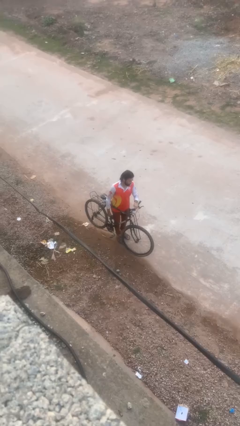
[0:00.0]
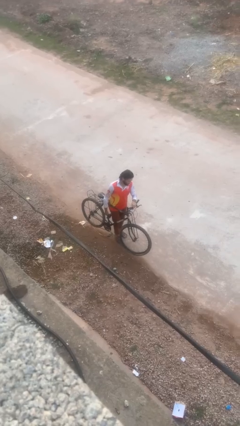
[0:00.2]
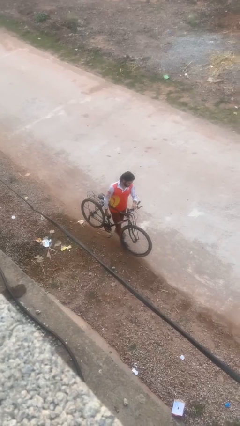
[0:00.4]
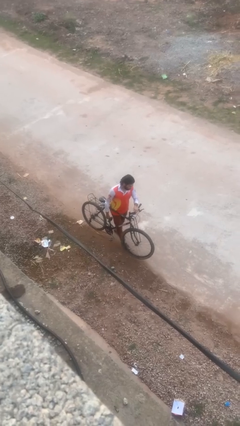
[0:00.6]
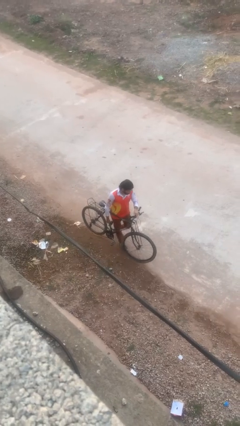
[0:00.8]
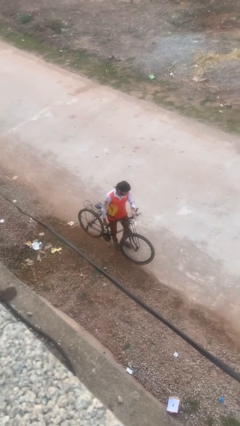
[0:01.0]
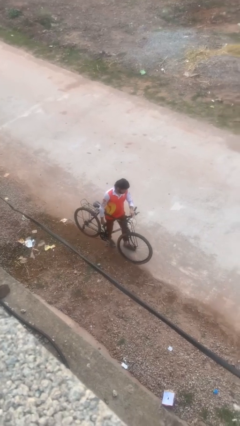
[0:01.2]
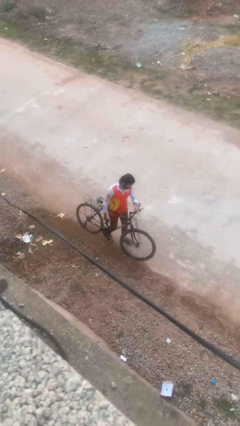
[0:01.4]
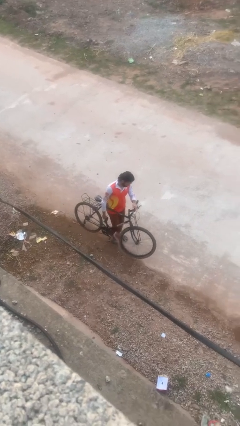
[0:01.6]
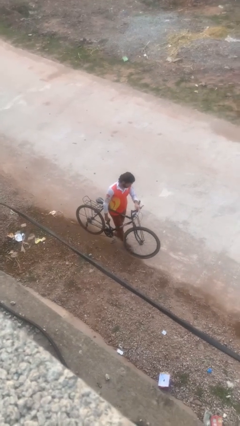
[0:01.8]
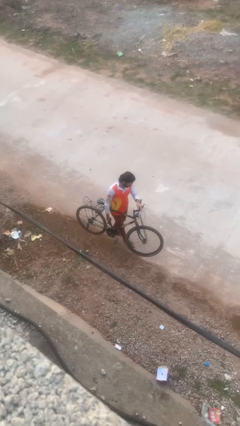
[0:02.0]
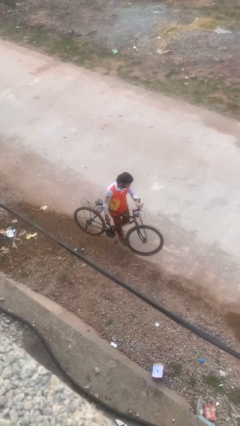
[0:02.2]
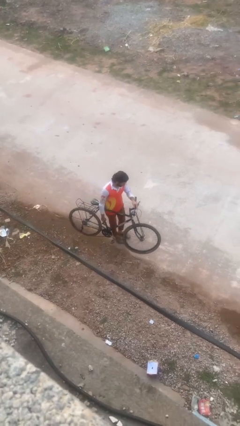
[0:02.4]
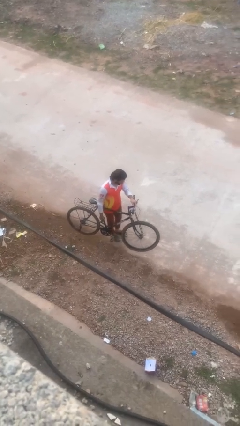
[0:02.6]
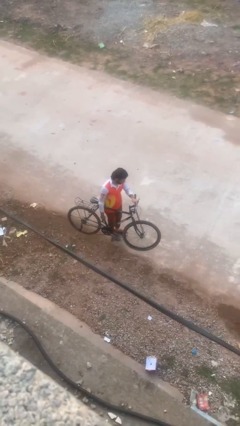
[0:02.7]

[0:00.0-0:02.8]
person carries bicycle

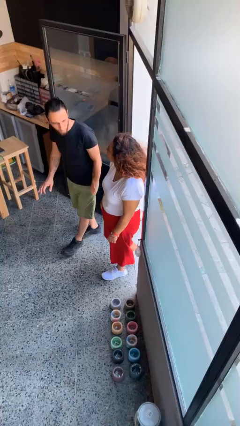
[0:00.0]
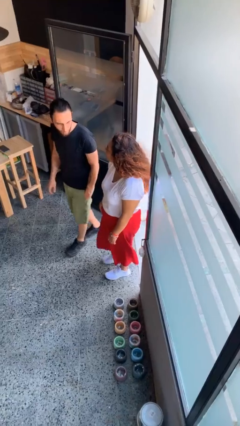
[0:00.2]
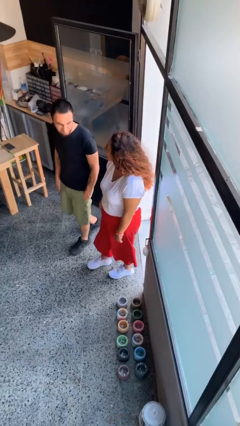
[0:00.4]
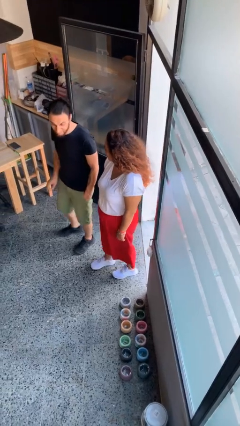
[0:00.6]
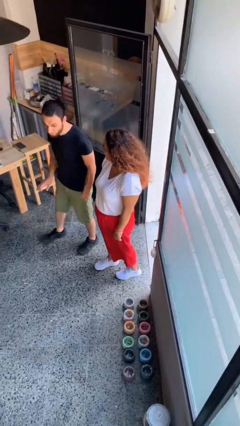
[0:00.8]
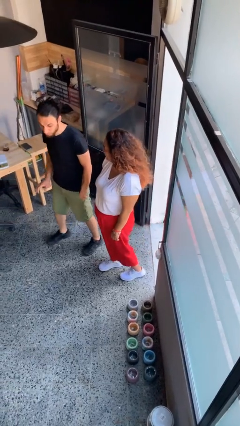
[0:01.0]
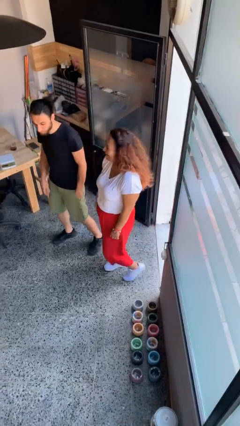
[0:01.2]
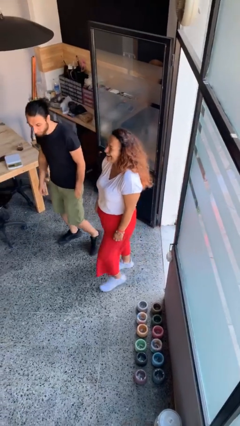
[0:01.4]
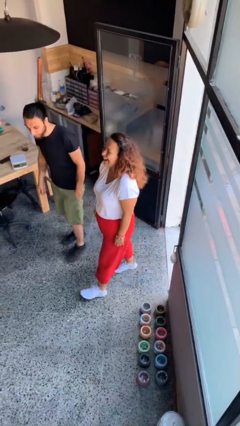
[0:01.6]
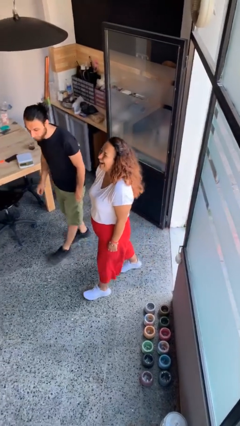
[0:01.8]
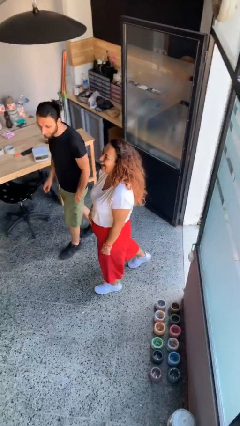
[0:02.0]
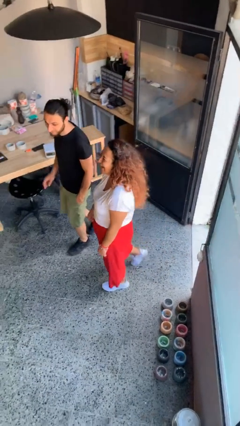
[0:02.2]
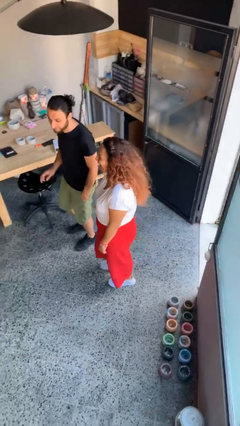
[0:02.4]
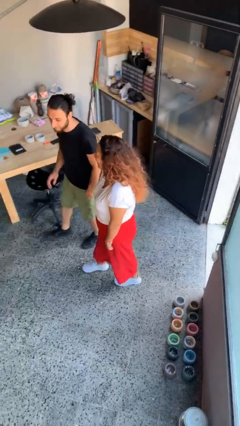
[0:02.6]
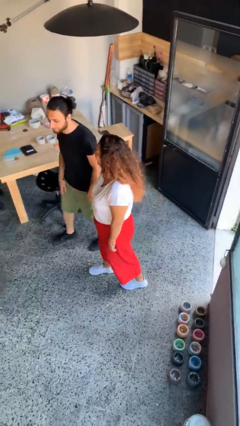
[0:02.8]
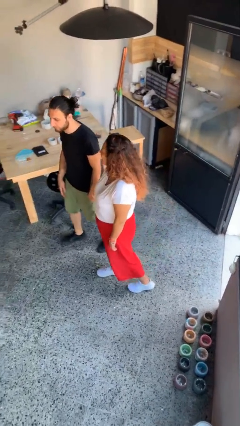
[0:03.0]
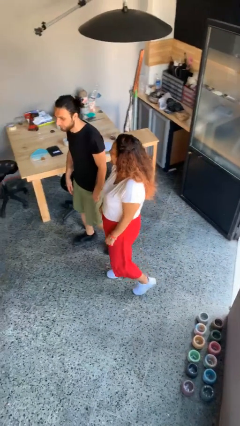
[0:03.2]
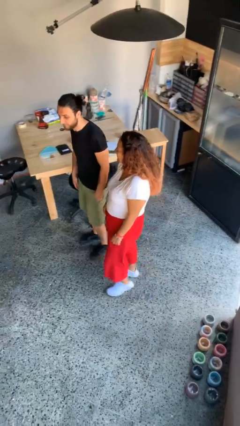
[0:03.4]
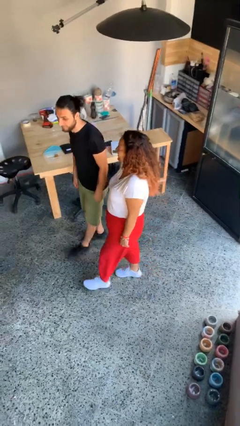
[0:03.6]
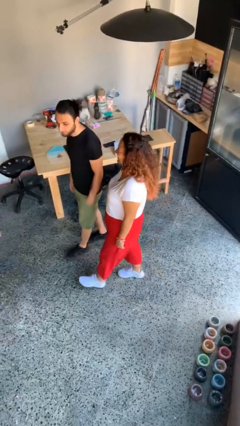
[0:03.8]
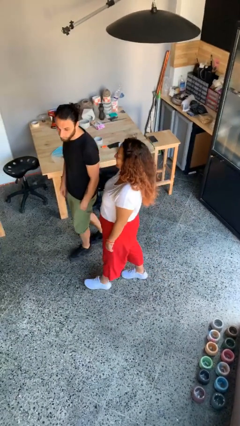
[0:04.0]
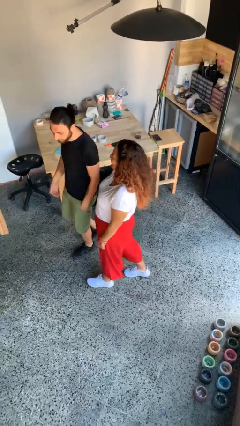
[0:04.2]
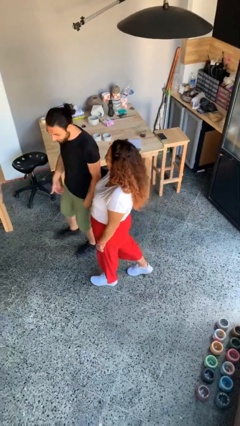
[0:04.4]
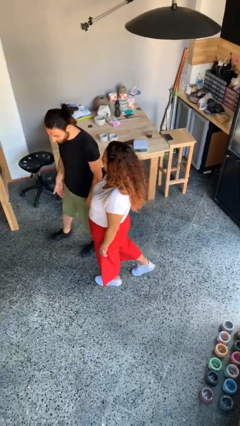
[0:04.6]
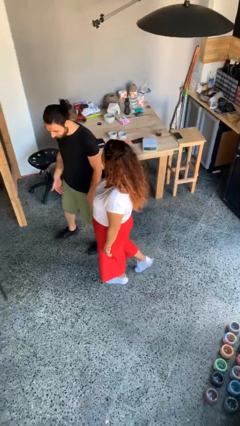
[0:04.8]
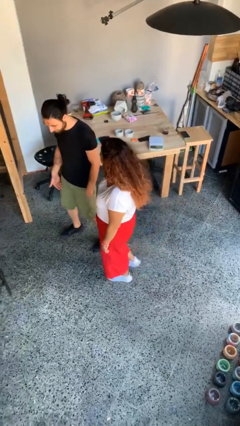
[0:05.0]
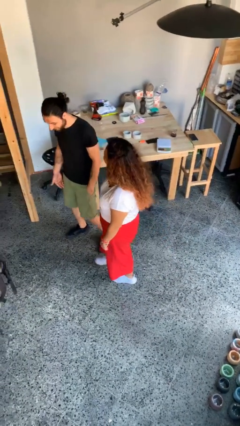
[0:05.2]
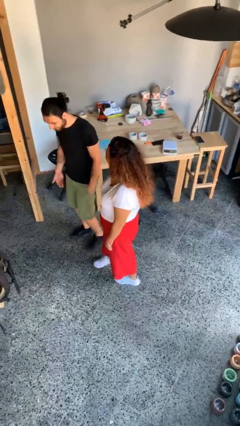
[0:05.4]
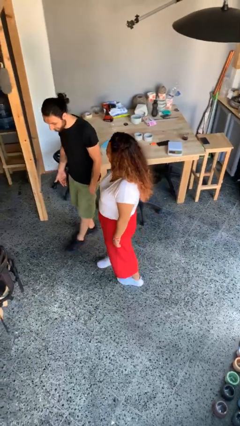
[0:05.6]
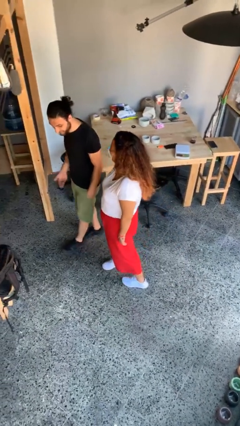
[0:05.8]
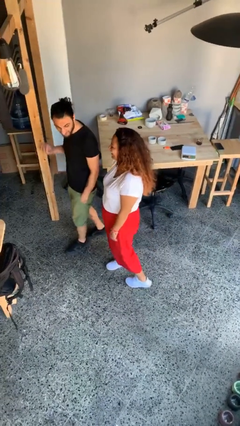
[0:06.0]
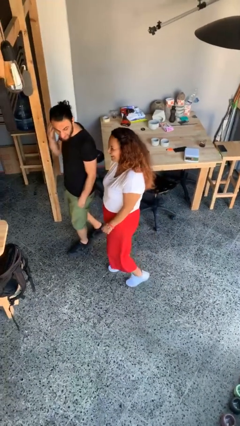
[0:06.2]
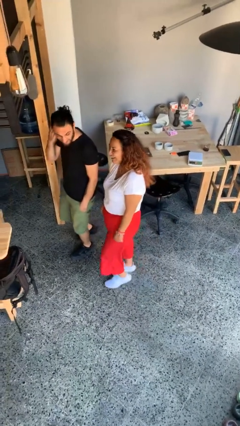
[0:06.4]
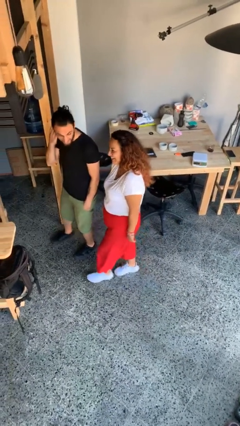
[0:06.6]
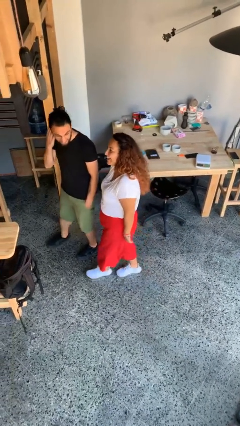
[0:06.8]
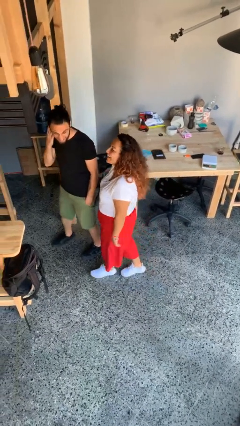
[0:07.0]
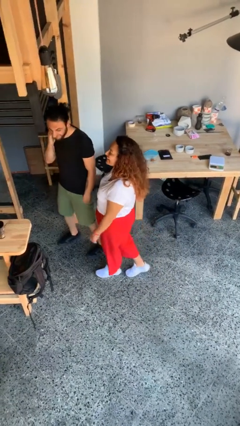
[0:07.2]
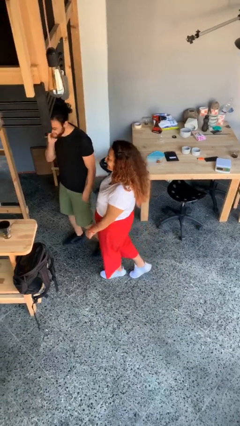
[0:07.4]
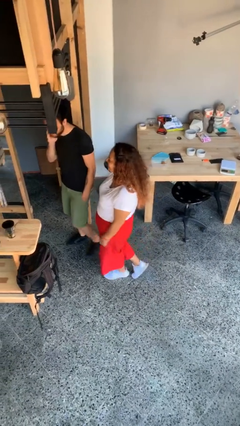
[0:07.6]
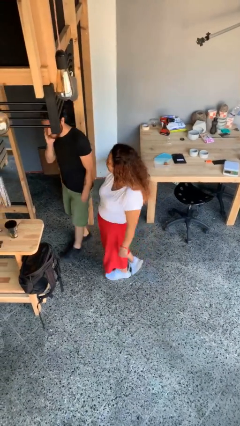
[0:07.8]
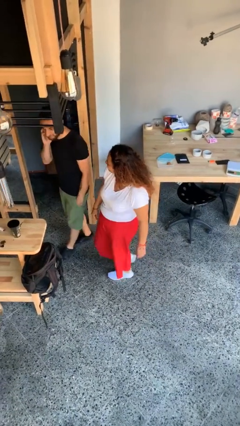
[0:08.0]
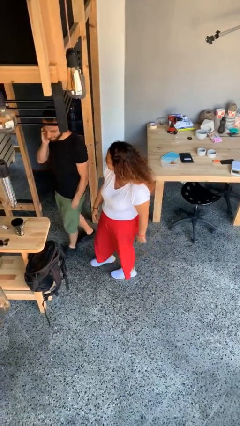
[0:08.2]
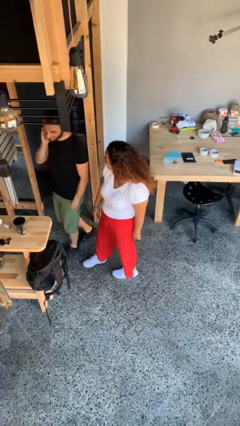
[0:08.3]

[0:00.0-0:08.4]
person talks to person

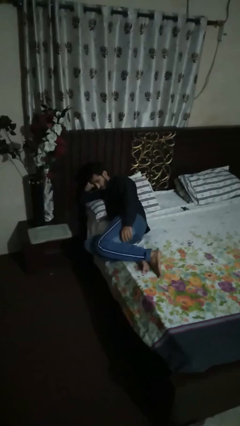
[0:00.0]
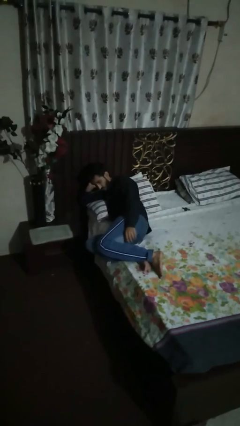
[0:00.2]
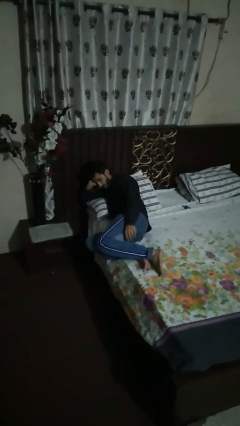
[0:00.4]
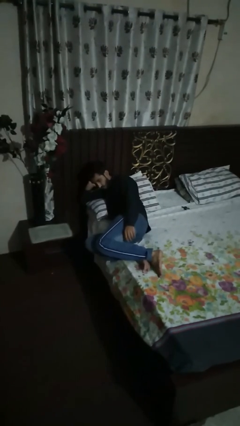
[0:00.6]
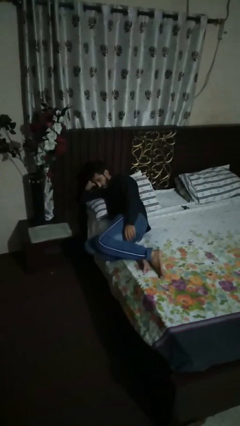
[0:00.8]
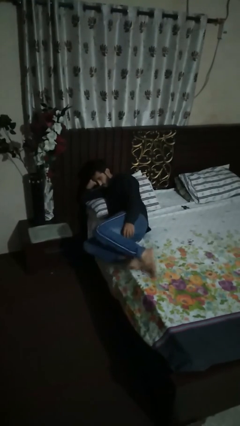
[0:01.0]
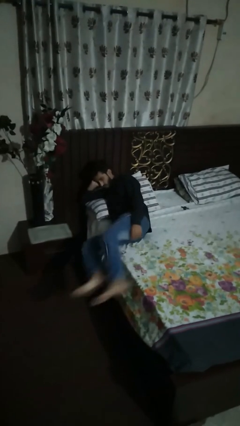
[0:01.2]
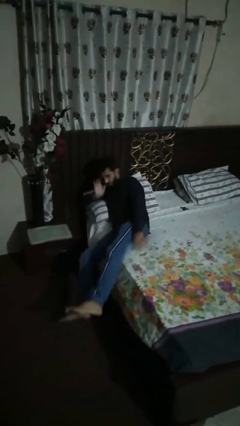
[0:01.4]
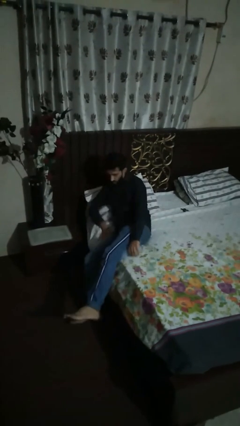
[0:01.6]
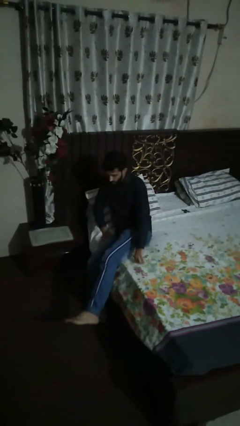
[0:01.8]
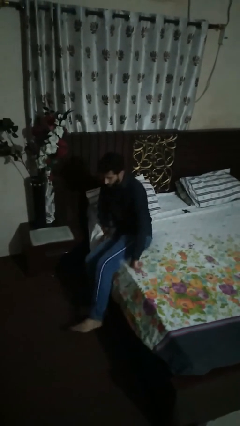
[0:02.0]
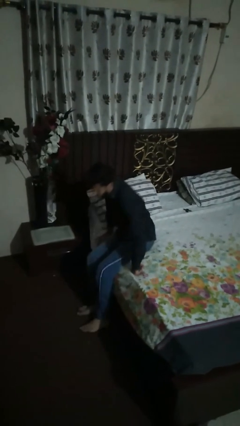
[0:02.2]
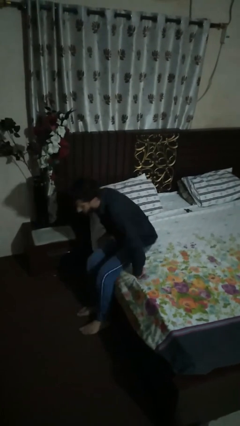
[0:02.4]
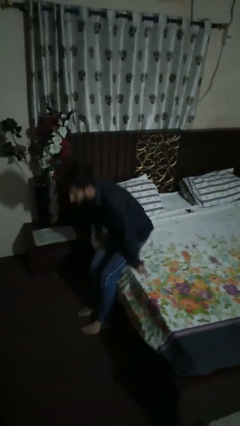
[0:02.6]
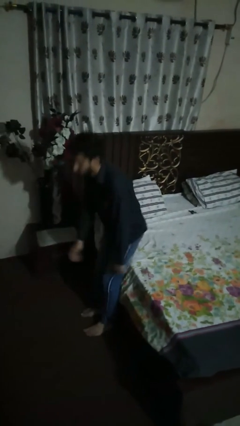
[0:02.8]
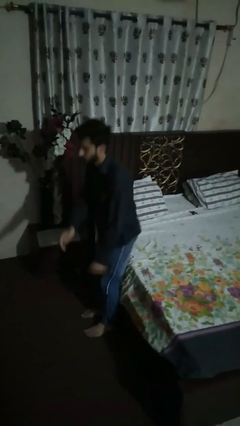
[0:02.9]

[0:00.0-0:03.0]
person stands up

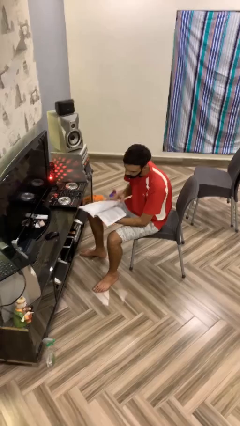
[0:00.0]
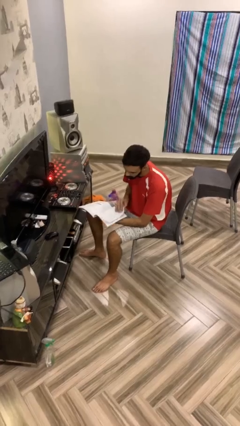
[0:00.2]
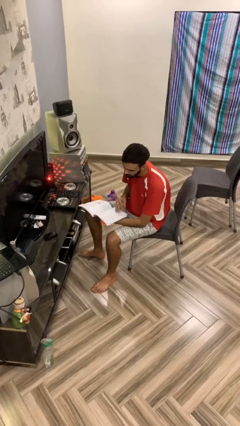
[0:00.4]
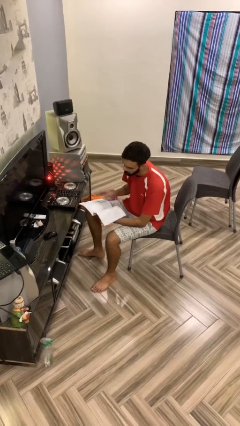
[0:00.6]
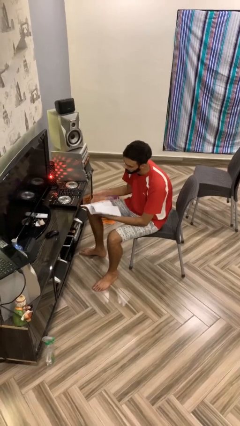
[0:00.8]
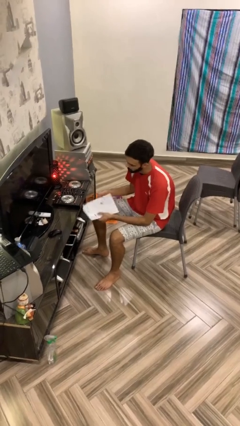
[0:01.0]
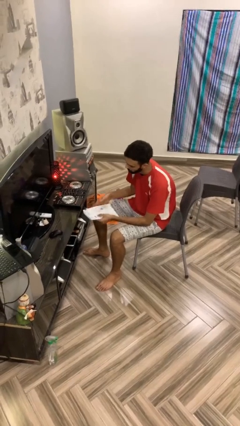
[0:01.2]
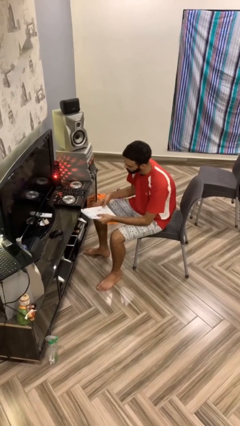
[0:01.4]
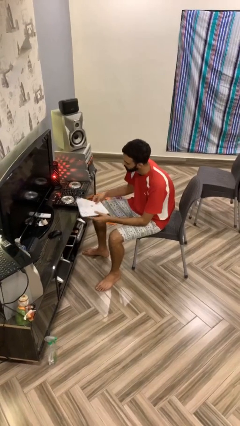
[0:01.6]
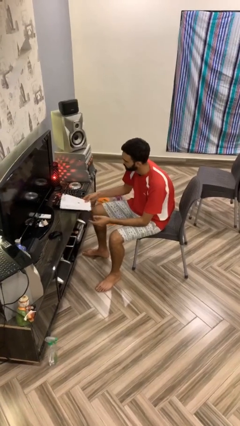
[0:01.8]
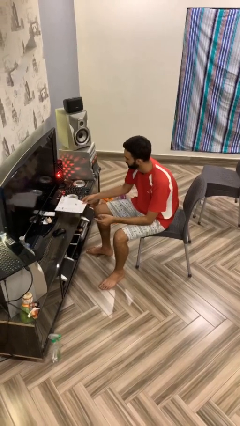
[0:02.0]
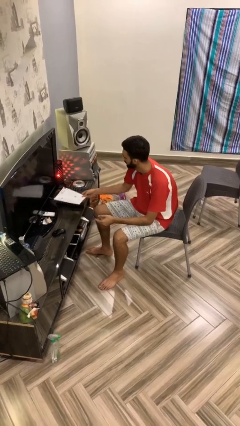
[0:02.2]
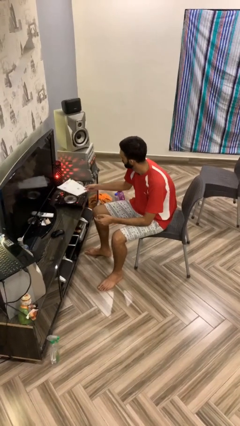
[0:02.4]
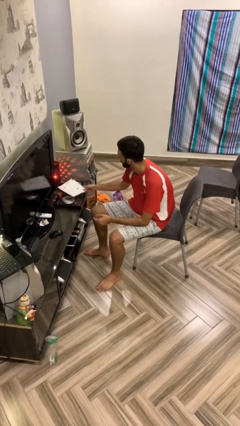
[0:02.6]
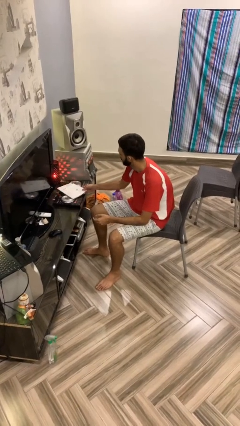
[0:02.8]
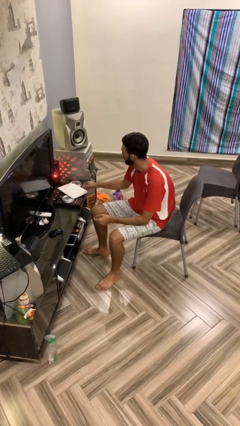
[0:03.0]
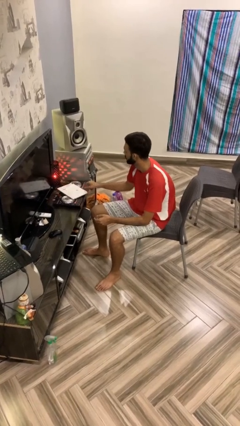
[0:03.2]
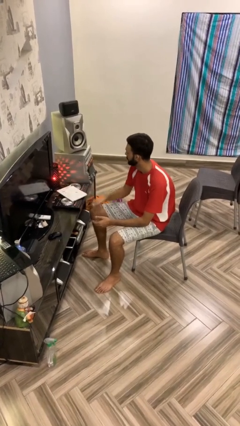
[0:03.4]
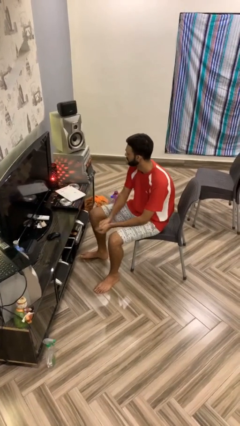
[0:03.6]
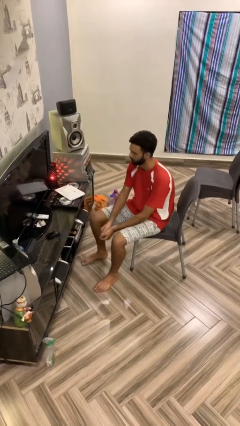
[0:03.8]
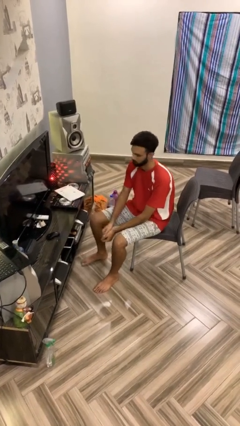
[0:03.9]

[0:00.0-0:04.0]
person puts down object on table

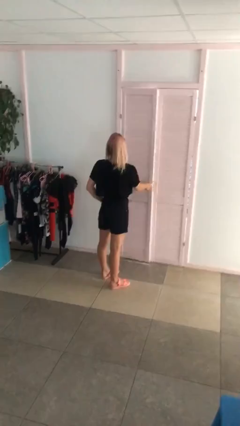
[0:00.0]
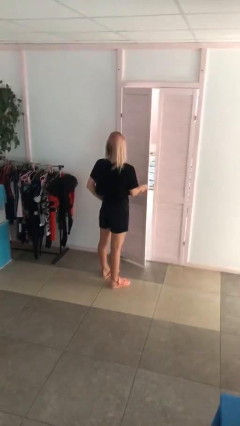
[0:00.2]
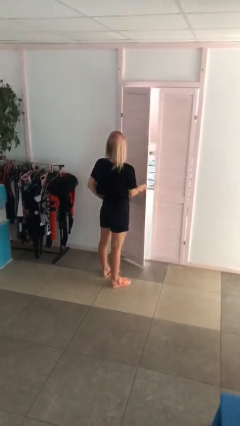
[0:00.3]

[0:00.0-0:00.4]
person opens facility door
